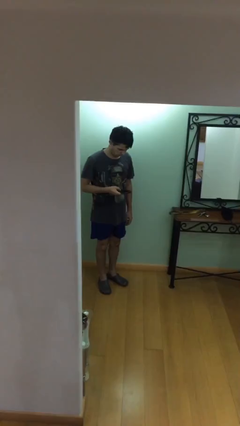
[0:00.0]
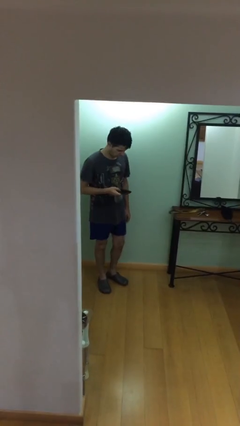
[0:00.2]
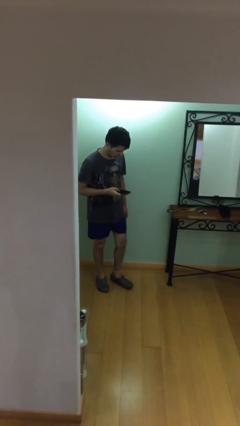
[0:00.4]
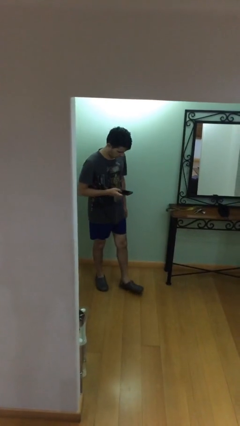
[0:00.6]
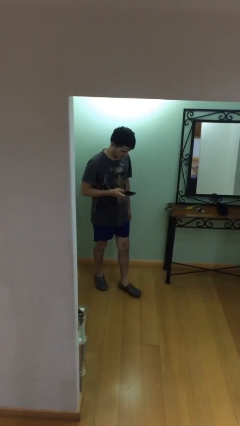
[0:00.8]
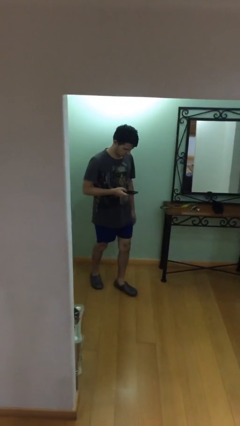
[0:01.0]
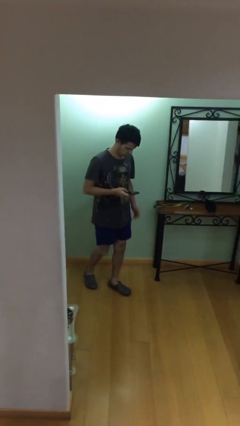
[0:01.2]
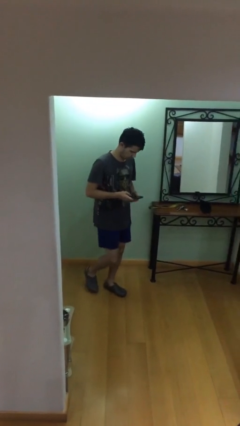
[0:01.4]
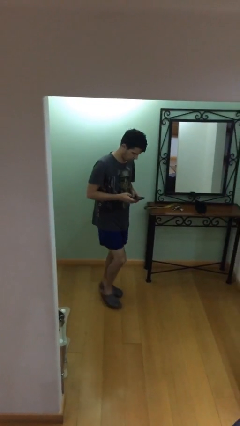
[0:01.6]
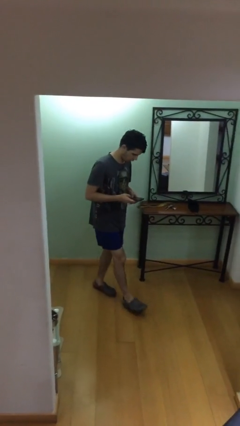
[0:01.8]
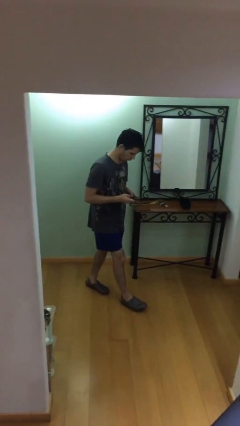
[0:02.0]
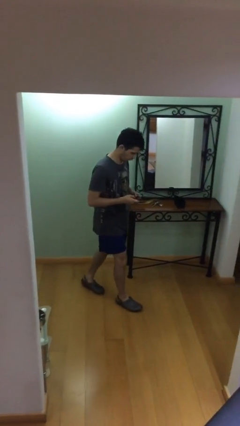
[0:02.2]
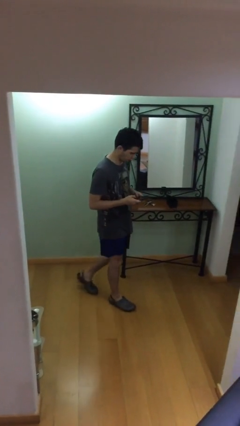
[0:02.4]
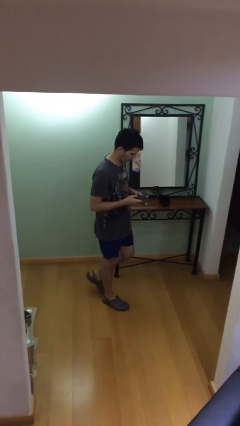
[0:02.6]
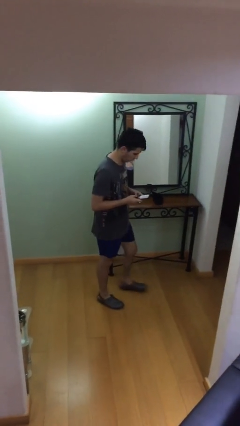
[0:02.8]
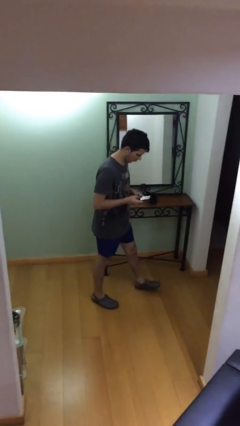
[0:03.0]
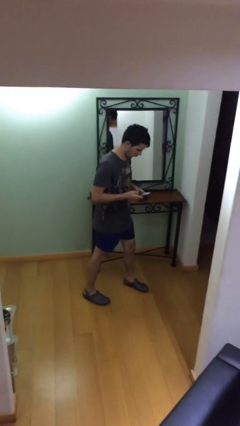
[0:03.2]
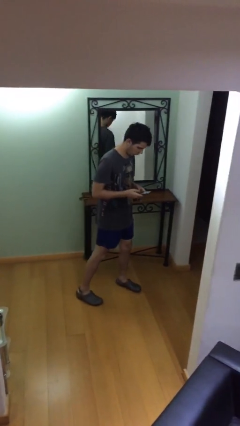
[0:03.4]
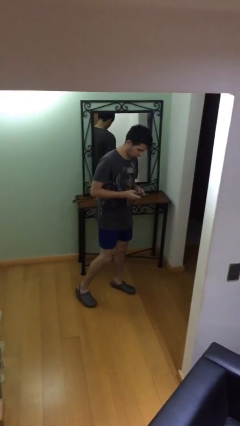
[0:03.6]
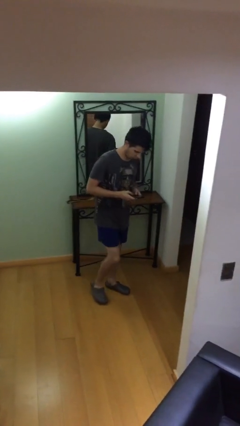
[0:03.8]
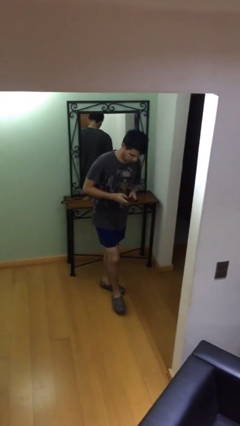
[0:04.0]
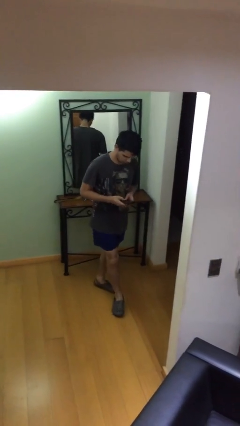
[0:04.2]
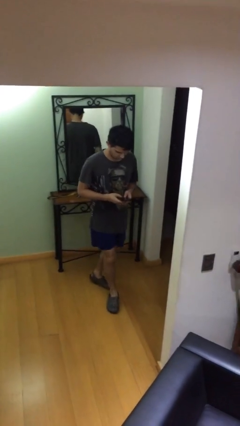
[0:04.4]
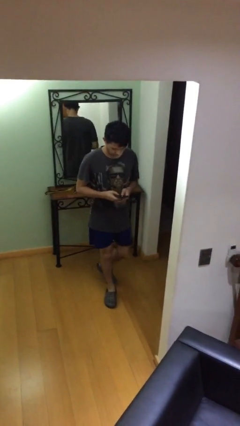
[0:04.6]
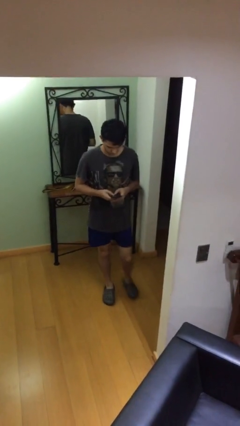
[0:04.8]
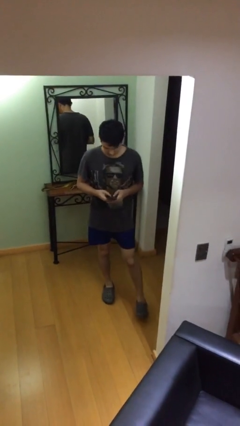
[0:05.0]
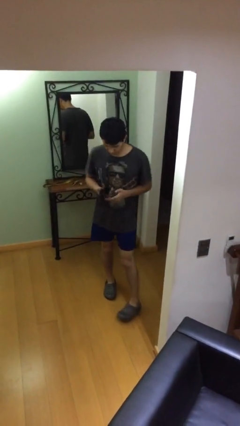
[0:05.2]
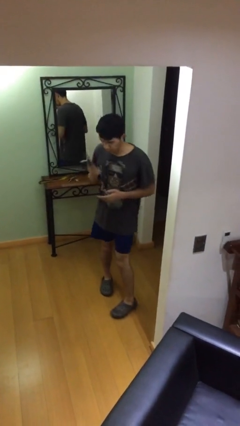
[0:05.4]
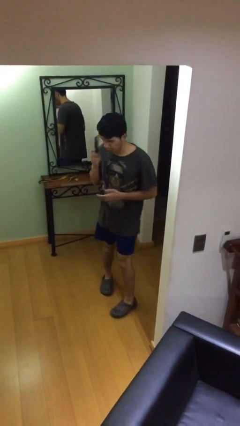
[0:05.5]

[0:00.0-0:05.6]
person texts on phone

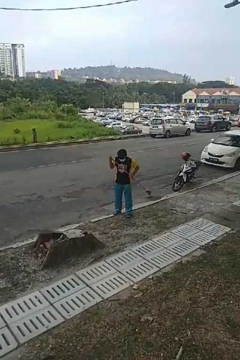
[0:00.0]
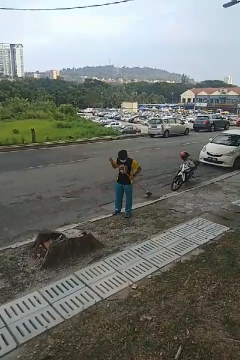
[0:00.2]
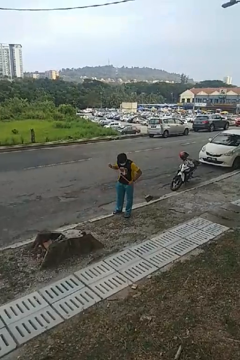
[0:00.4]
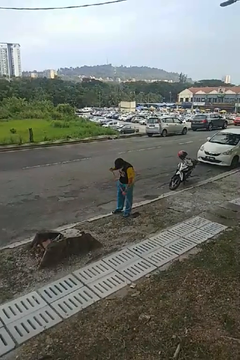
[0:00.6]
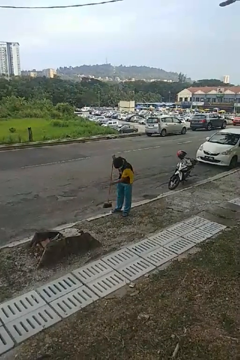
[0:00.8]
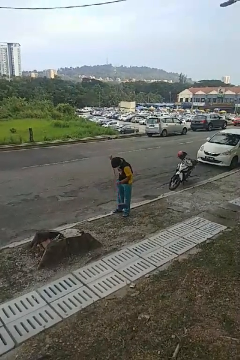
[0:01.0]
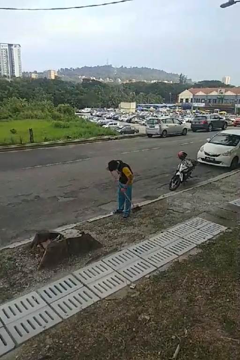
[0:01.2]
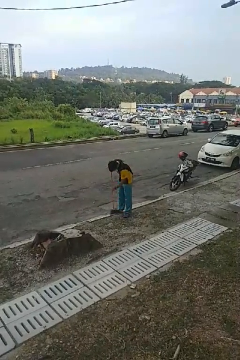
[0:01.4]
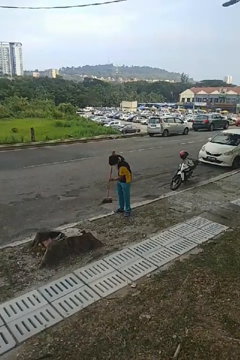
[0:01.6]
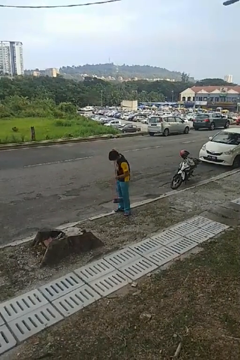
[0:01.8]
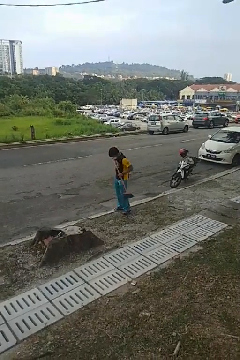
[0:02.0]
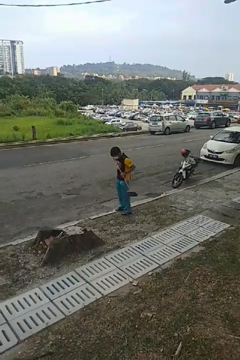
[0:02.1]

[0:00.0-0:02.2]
person sweeps floor

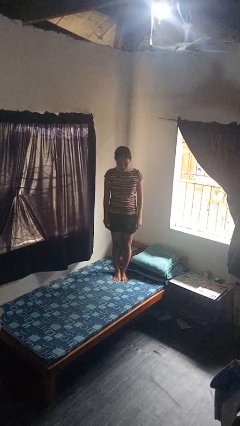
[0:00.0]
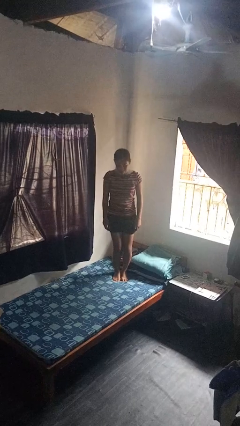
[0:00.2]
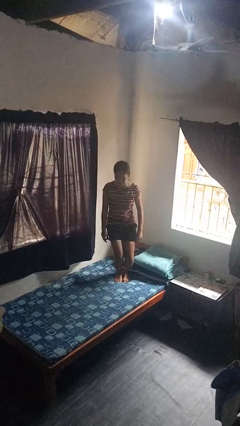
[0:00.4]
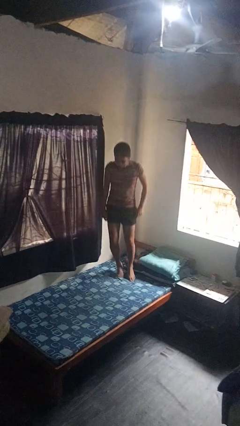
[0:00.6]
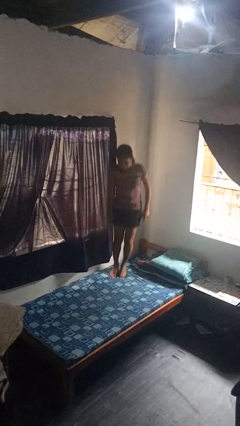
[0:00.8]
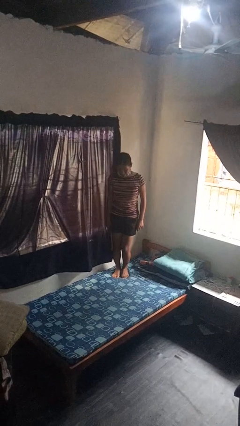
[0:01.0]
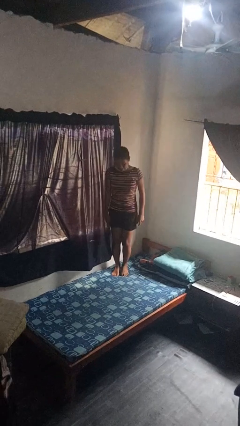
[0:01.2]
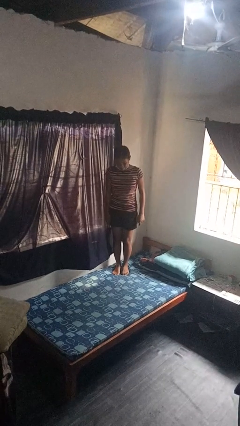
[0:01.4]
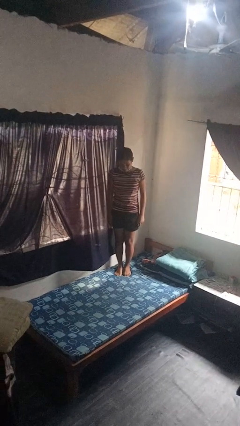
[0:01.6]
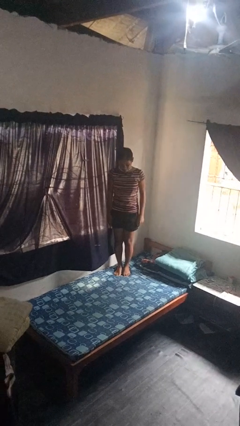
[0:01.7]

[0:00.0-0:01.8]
person jumps on bed

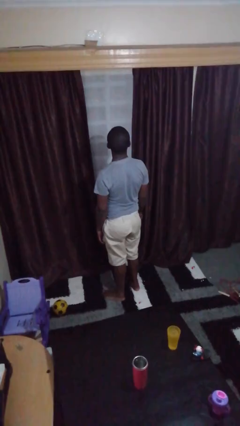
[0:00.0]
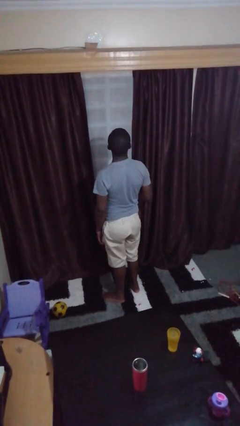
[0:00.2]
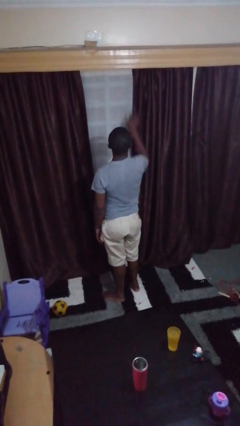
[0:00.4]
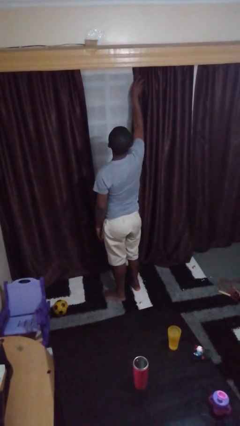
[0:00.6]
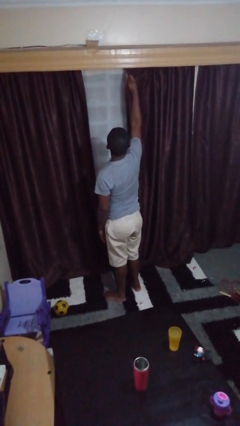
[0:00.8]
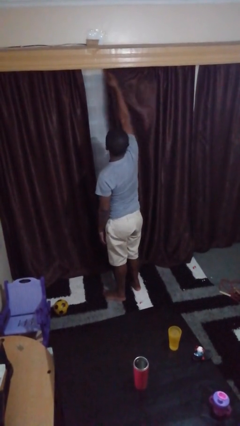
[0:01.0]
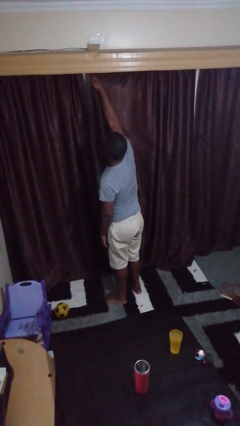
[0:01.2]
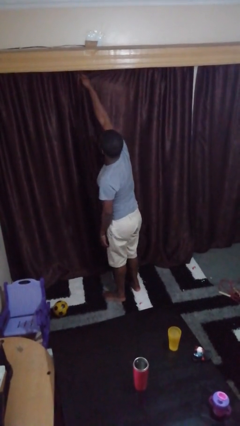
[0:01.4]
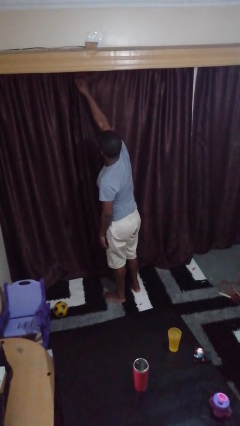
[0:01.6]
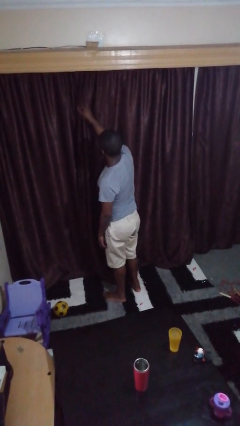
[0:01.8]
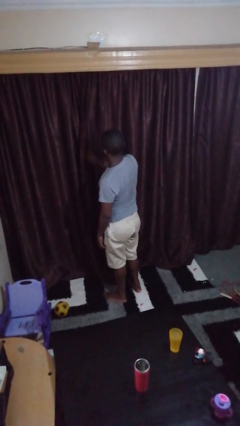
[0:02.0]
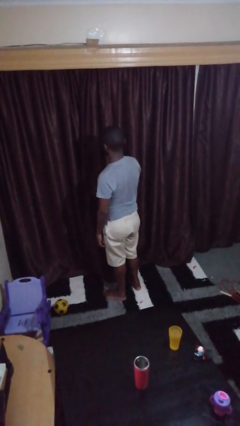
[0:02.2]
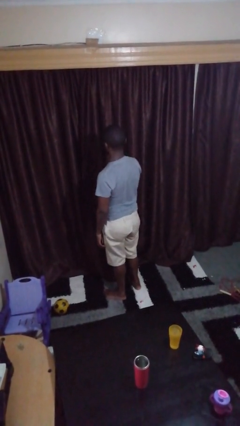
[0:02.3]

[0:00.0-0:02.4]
person closes curtains

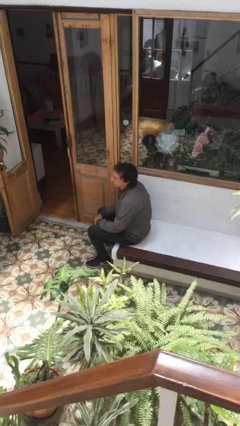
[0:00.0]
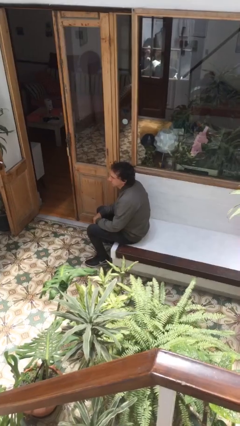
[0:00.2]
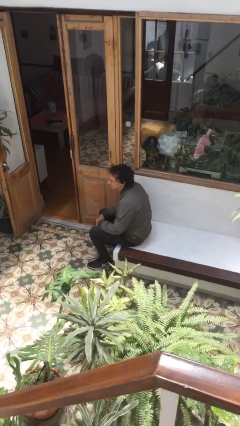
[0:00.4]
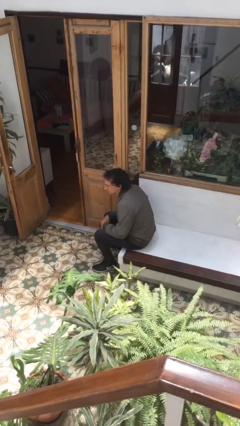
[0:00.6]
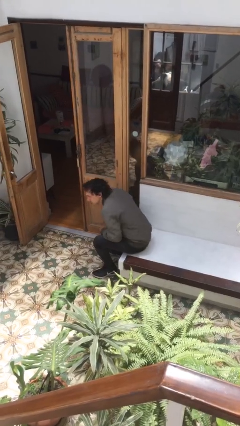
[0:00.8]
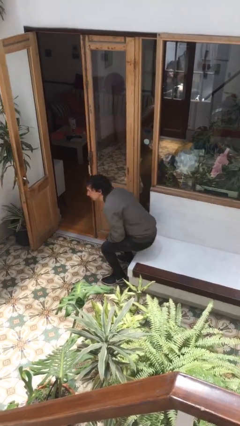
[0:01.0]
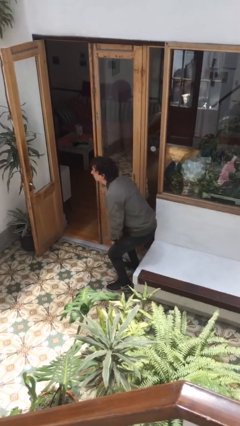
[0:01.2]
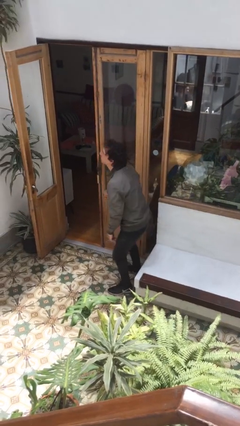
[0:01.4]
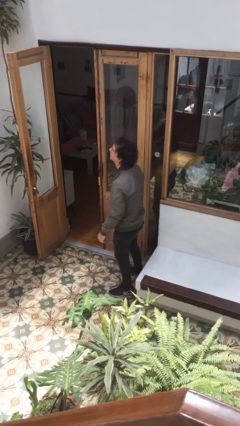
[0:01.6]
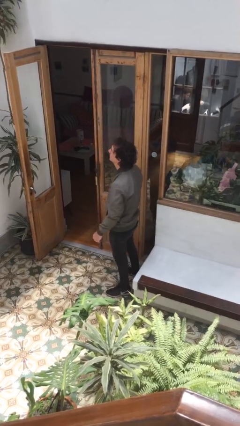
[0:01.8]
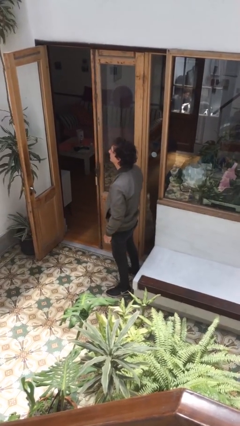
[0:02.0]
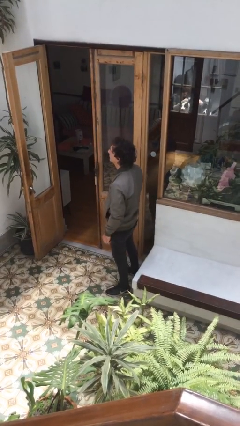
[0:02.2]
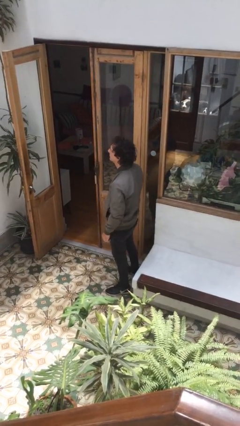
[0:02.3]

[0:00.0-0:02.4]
person stands up

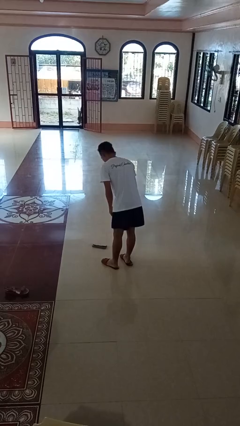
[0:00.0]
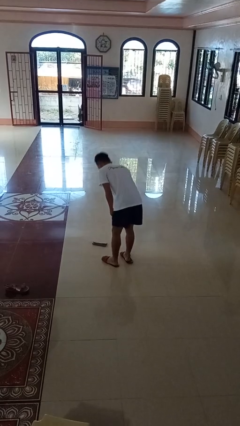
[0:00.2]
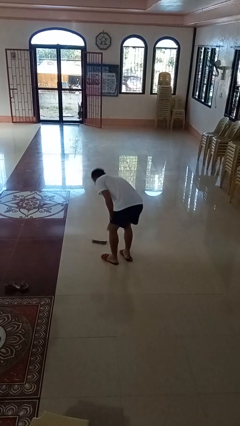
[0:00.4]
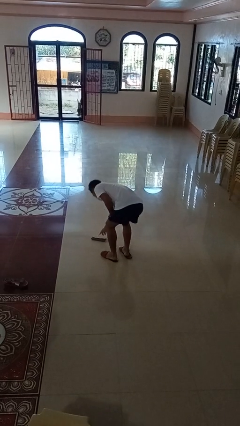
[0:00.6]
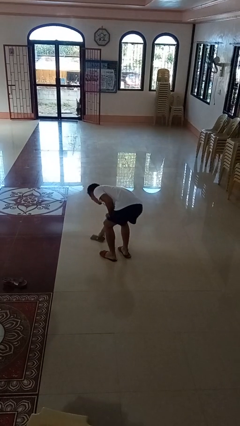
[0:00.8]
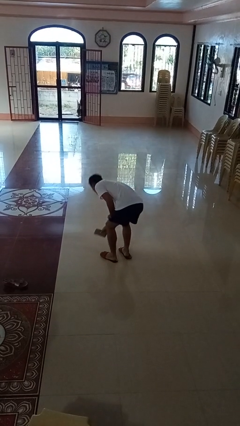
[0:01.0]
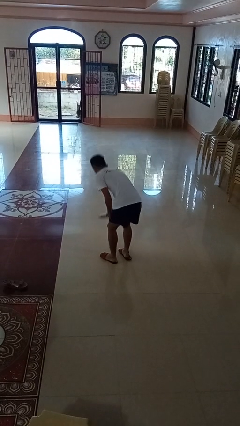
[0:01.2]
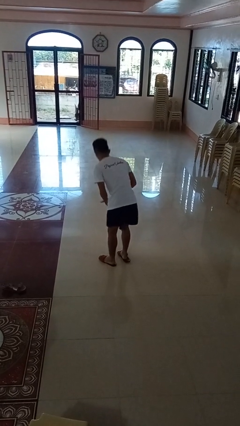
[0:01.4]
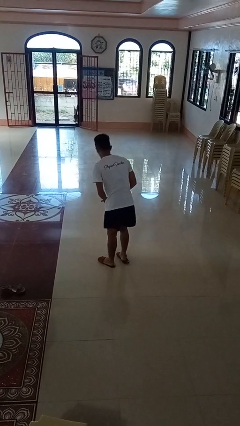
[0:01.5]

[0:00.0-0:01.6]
person picks up object from floor

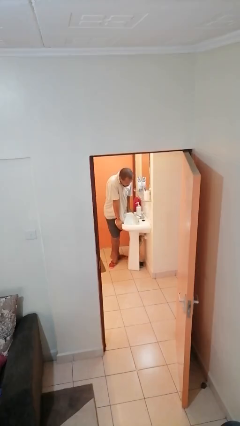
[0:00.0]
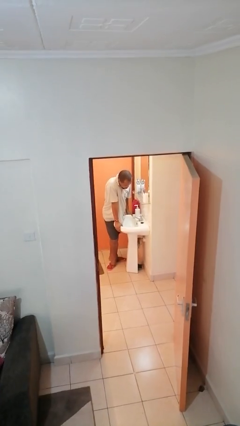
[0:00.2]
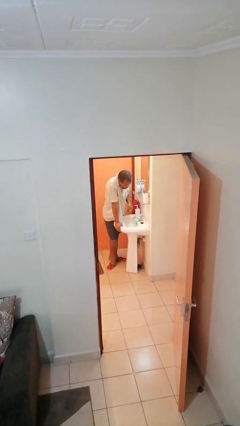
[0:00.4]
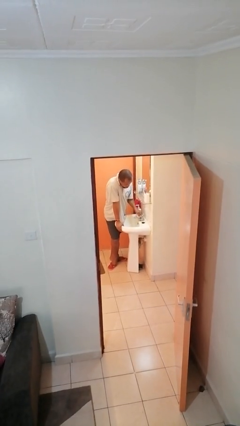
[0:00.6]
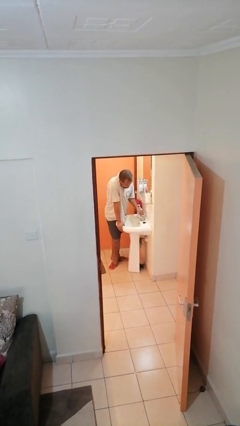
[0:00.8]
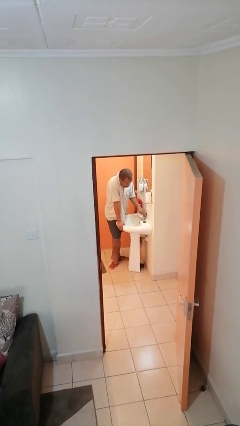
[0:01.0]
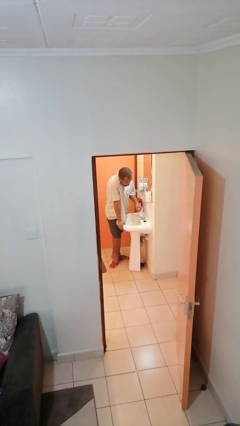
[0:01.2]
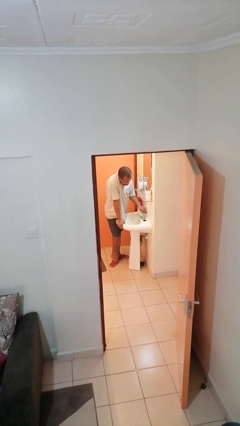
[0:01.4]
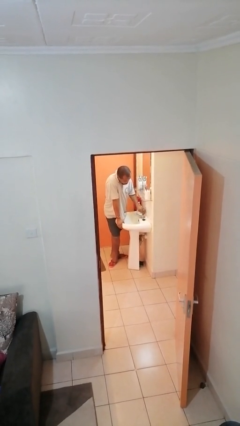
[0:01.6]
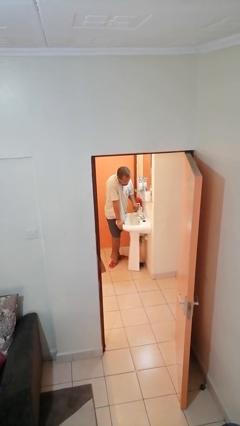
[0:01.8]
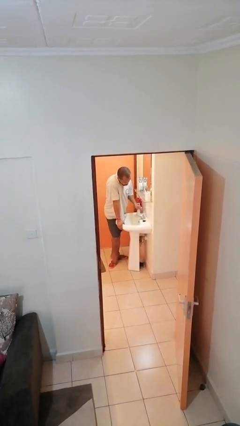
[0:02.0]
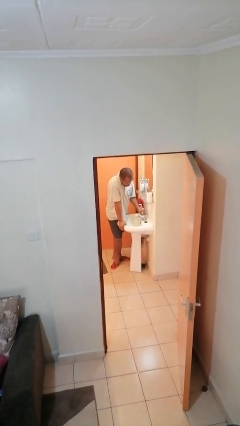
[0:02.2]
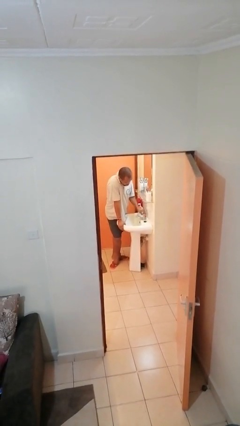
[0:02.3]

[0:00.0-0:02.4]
person turns off faucet
